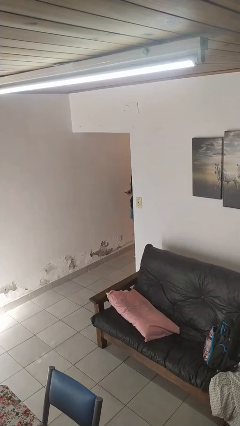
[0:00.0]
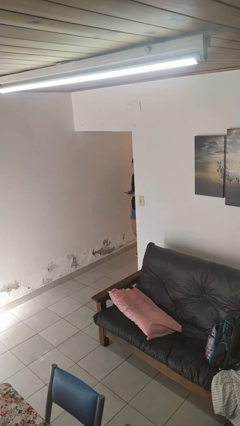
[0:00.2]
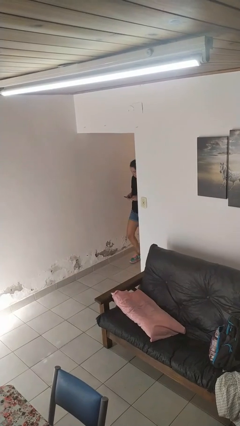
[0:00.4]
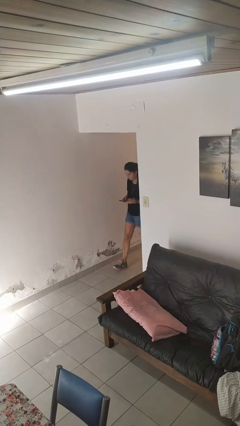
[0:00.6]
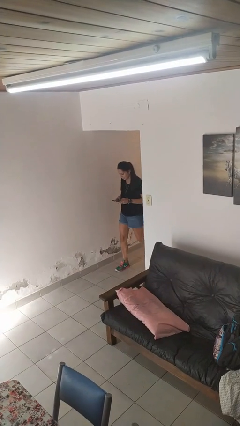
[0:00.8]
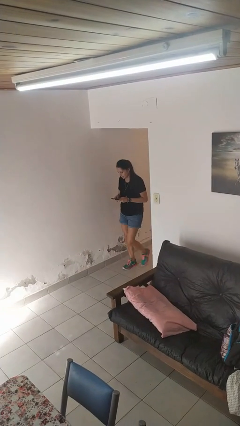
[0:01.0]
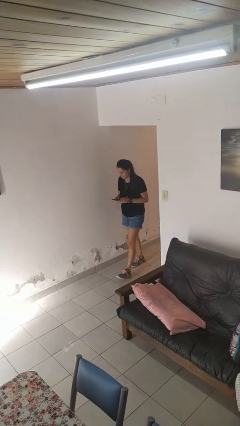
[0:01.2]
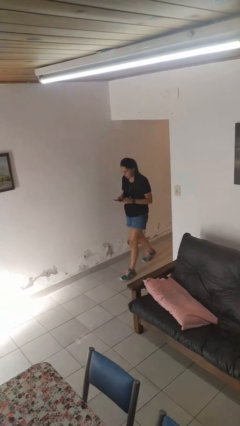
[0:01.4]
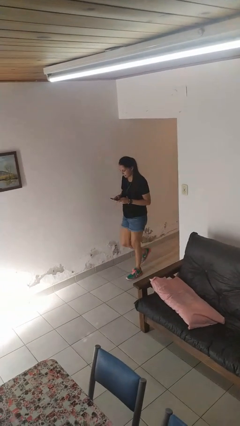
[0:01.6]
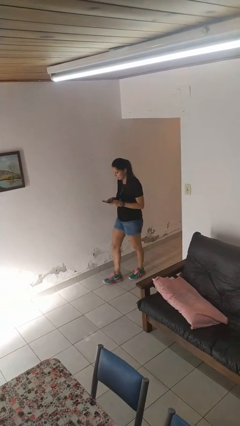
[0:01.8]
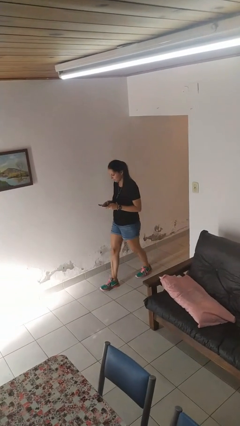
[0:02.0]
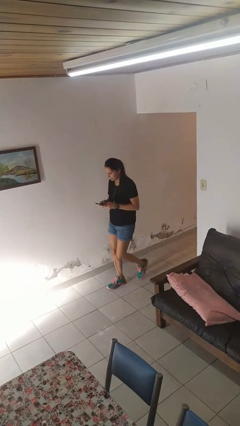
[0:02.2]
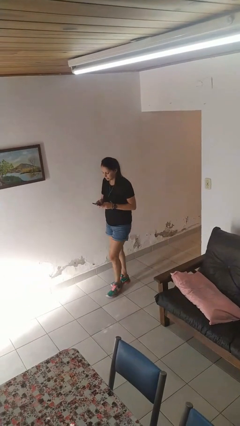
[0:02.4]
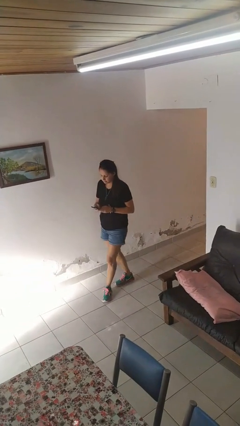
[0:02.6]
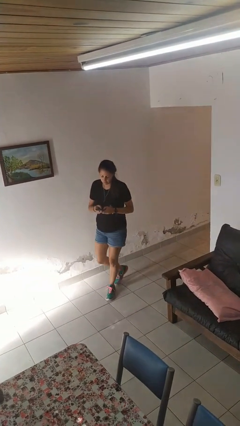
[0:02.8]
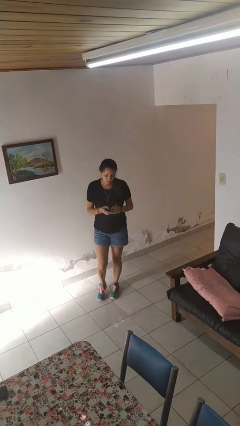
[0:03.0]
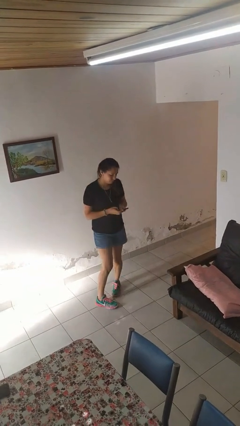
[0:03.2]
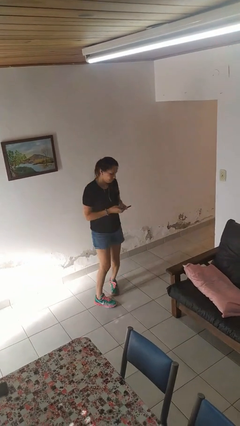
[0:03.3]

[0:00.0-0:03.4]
person enters scene through structure

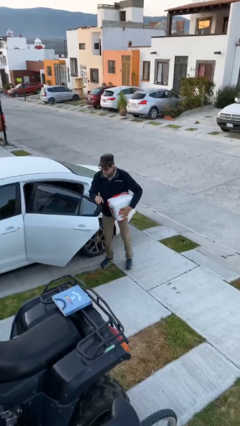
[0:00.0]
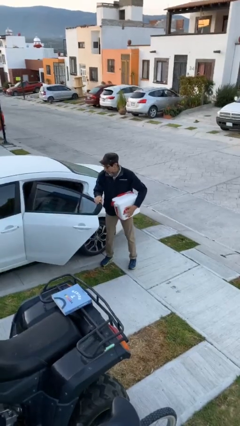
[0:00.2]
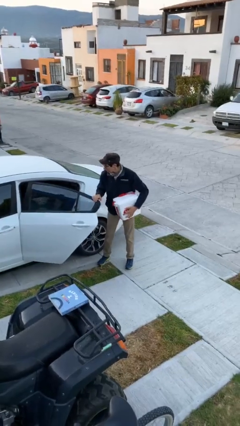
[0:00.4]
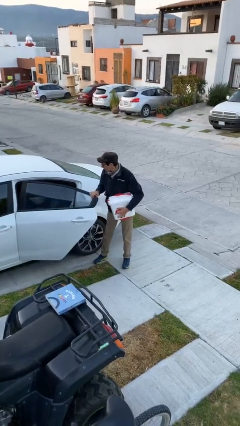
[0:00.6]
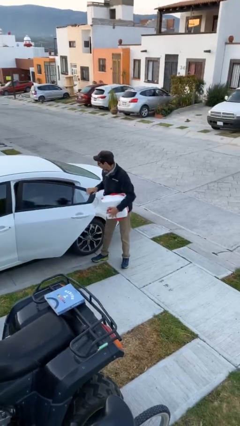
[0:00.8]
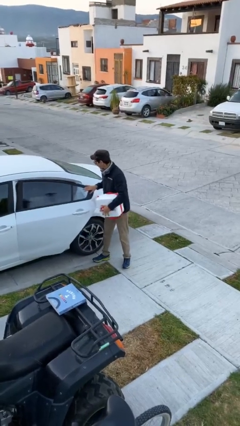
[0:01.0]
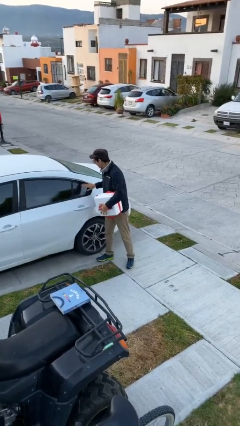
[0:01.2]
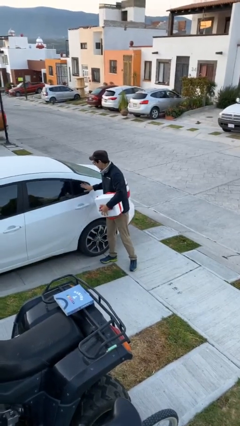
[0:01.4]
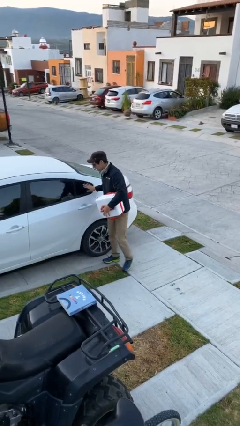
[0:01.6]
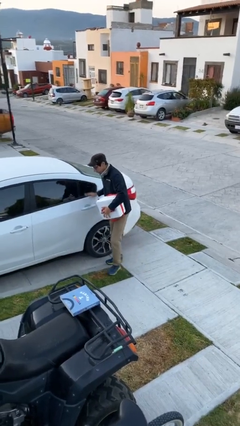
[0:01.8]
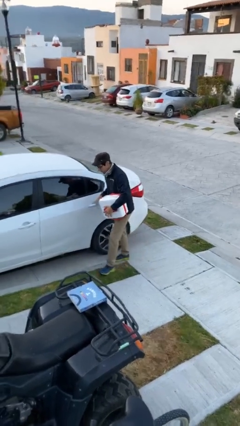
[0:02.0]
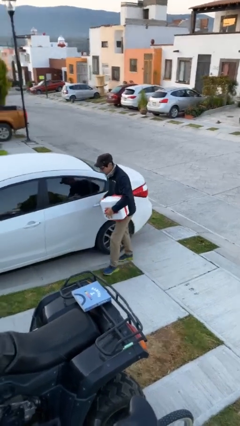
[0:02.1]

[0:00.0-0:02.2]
person closes car door

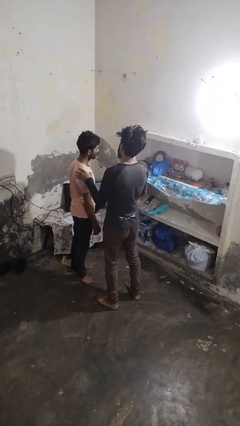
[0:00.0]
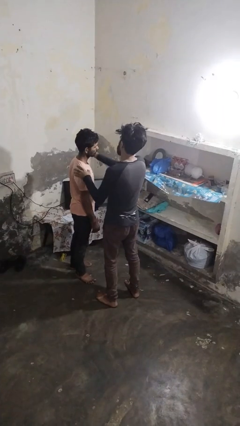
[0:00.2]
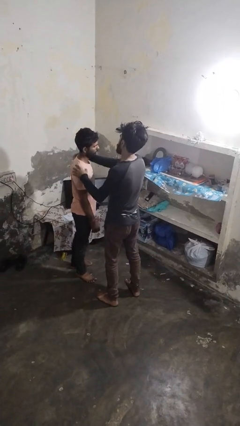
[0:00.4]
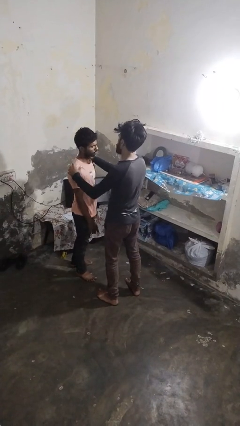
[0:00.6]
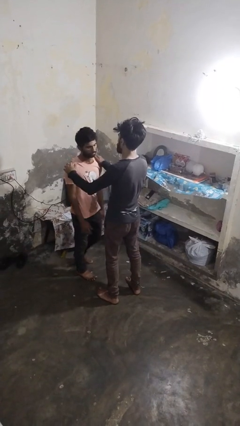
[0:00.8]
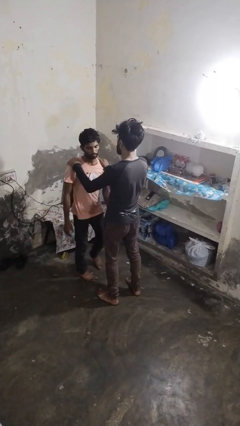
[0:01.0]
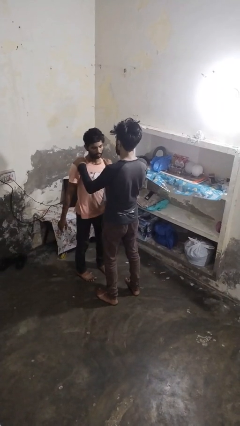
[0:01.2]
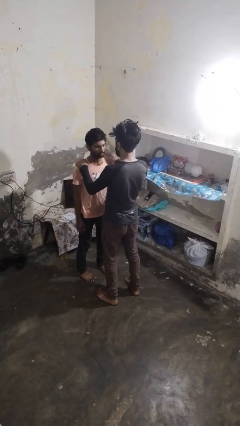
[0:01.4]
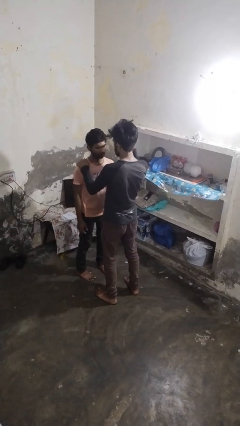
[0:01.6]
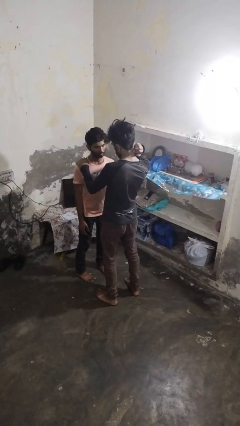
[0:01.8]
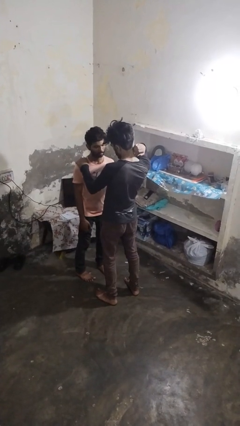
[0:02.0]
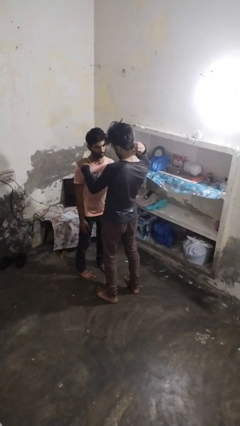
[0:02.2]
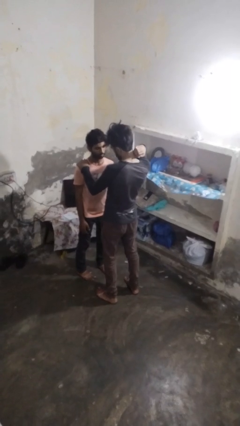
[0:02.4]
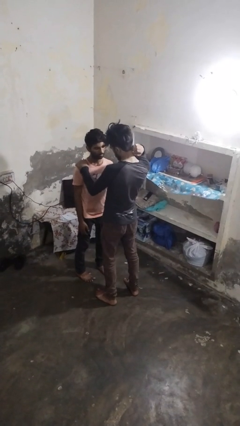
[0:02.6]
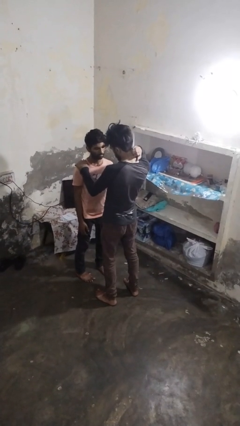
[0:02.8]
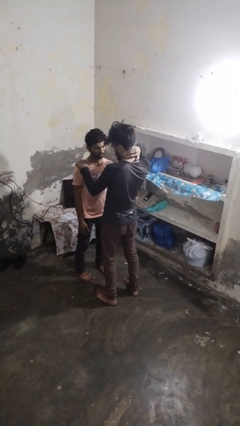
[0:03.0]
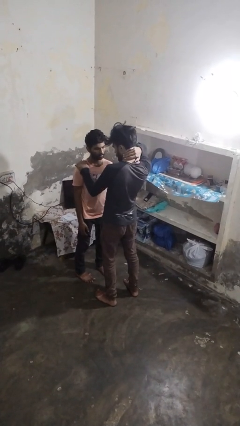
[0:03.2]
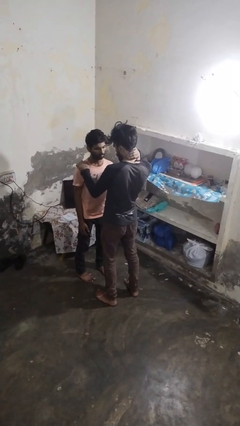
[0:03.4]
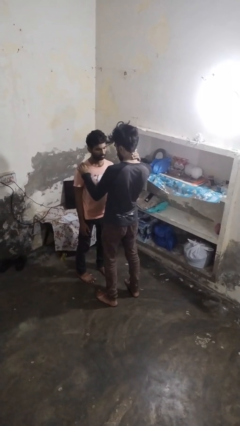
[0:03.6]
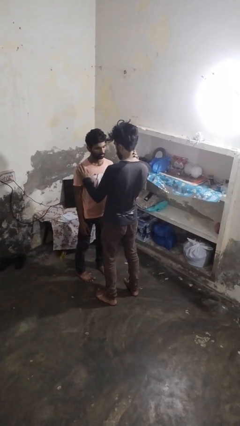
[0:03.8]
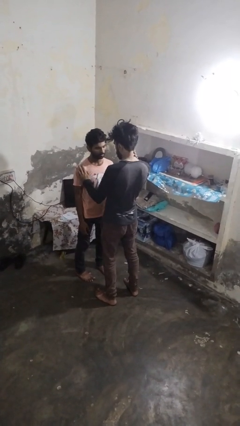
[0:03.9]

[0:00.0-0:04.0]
person spins person around

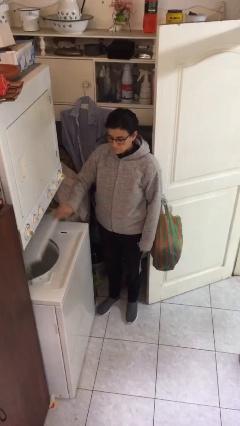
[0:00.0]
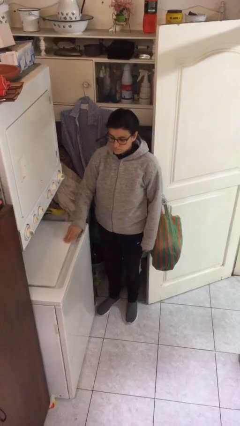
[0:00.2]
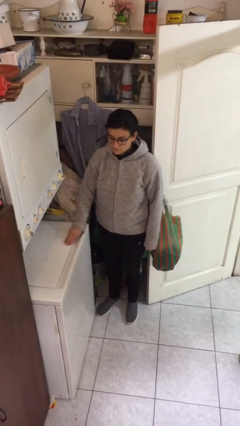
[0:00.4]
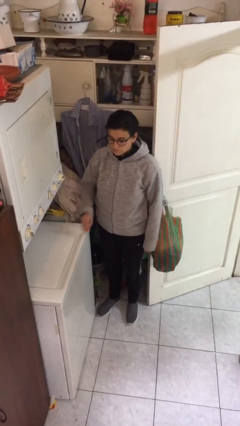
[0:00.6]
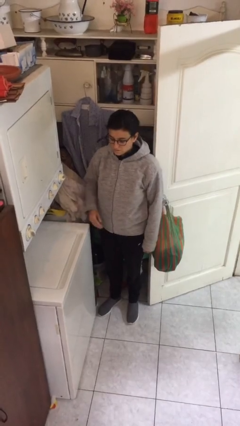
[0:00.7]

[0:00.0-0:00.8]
person closes clothes washer

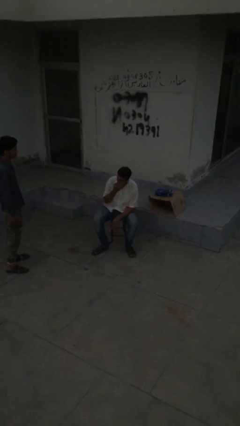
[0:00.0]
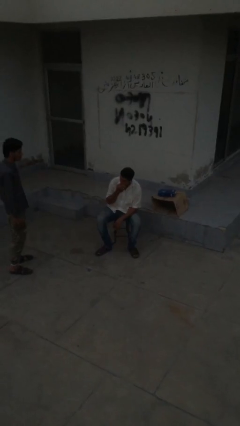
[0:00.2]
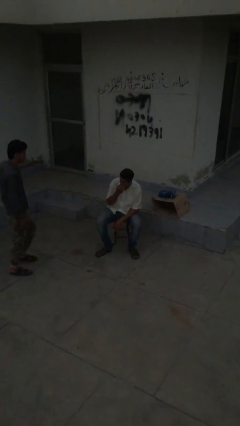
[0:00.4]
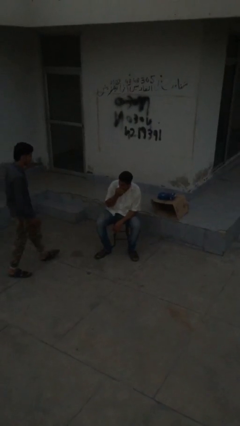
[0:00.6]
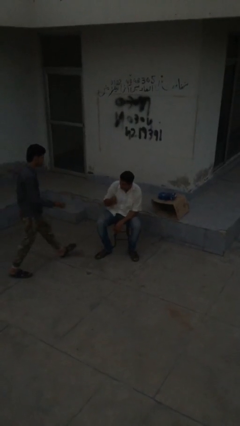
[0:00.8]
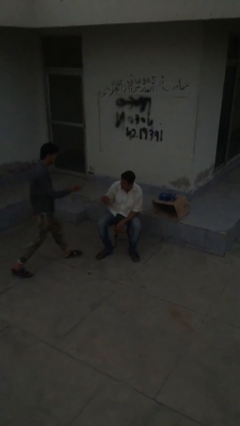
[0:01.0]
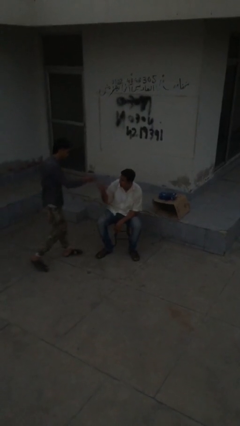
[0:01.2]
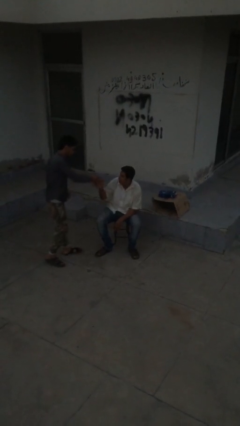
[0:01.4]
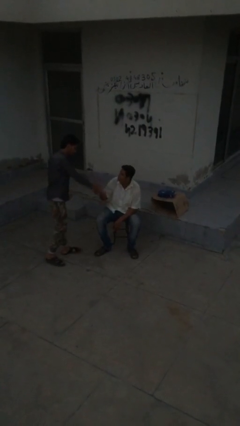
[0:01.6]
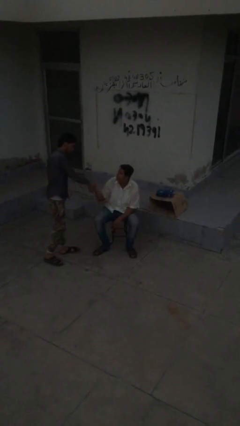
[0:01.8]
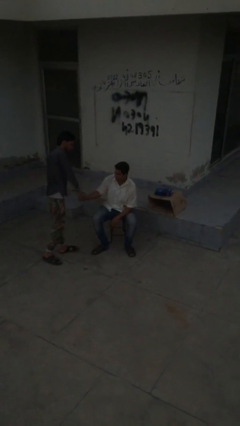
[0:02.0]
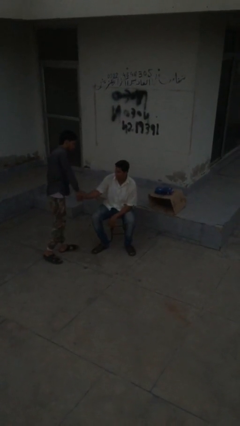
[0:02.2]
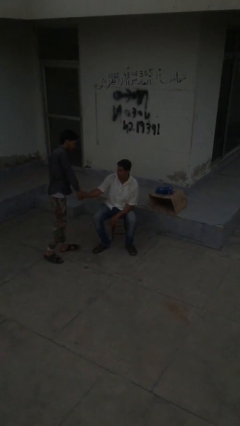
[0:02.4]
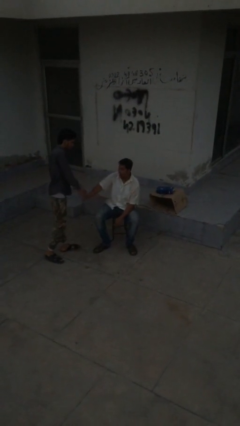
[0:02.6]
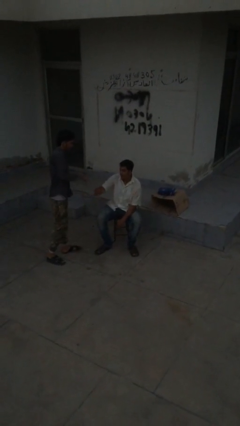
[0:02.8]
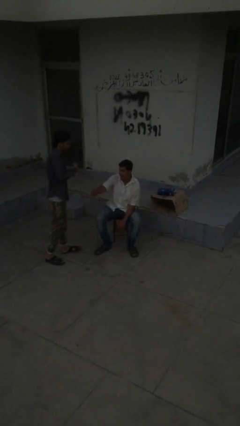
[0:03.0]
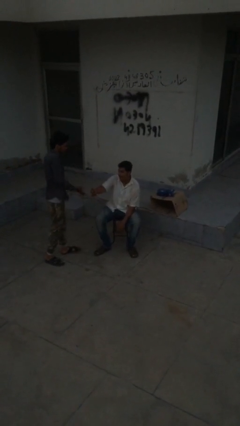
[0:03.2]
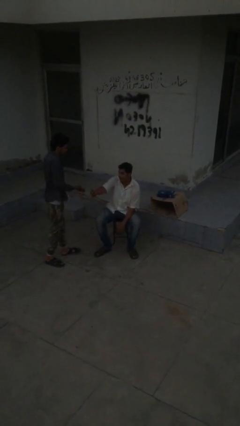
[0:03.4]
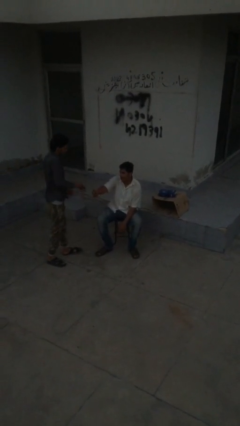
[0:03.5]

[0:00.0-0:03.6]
person shakes hand

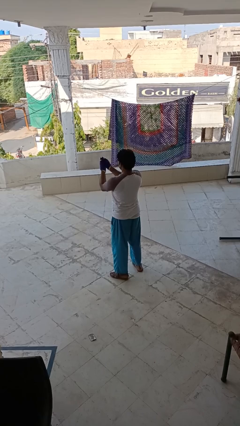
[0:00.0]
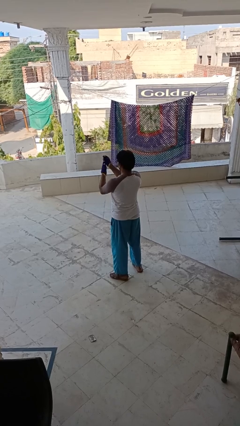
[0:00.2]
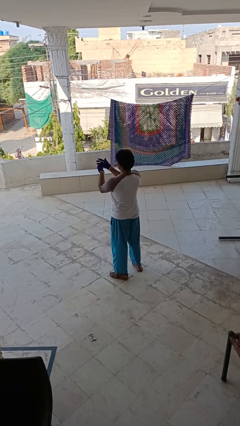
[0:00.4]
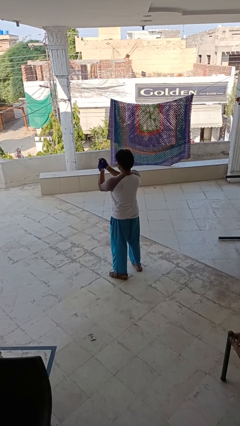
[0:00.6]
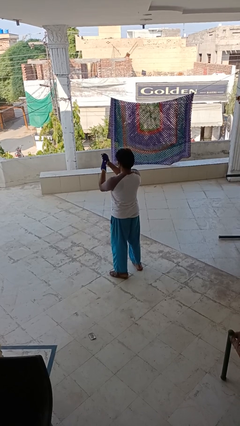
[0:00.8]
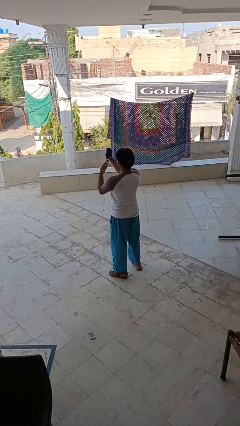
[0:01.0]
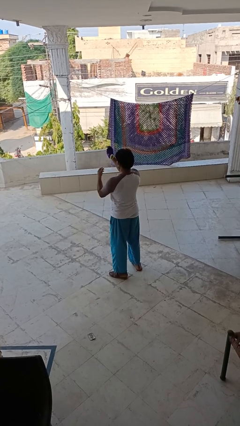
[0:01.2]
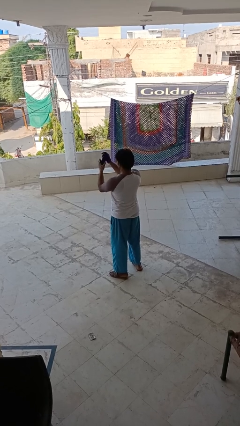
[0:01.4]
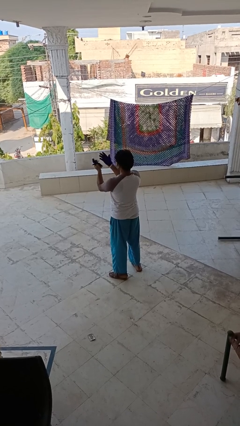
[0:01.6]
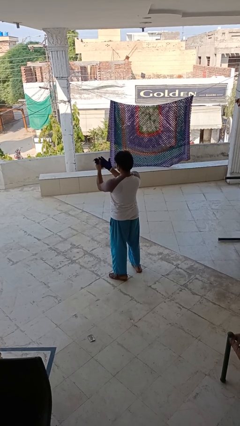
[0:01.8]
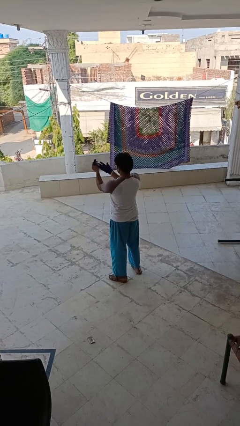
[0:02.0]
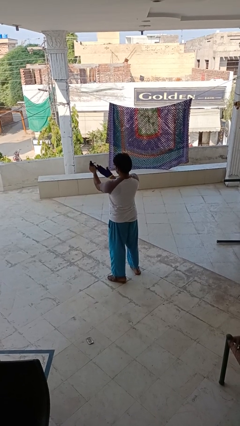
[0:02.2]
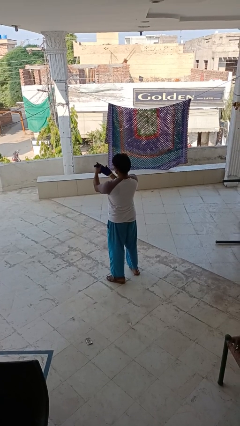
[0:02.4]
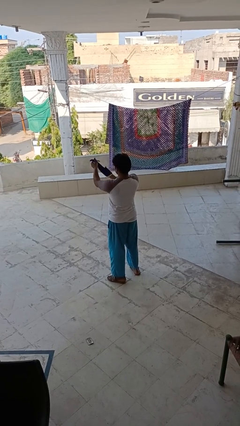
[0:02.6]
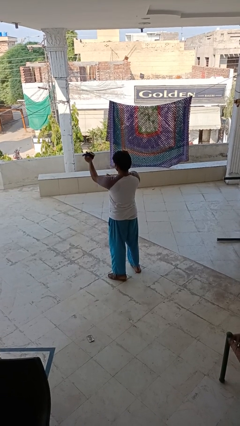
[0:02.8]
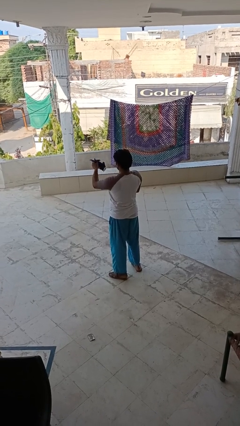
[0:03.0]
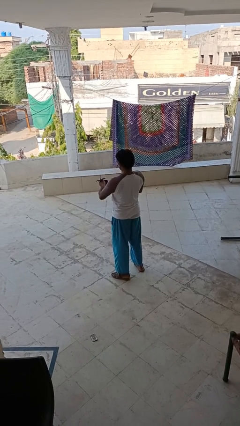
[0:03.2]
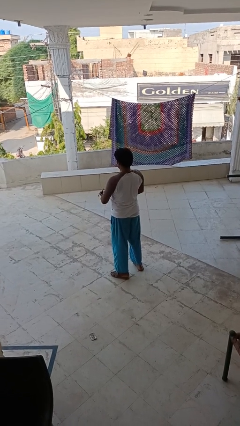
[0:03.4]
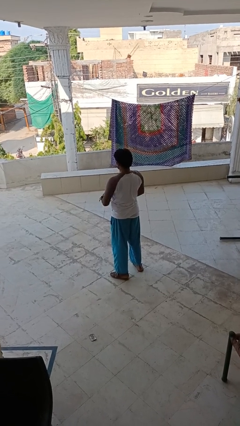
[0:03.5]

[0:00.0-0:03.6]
person takes off gloves
